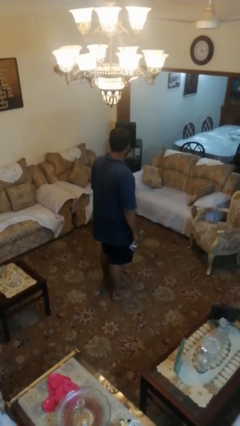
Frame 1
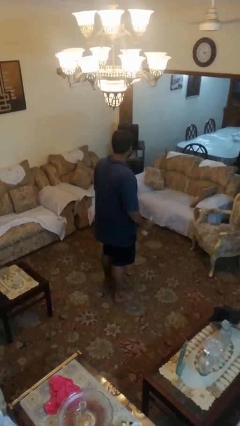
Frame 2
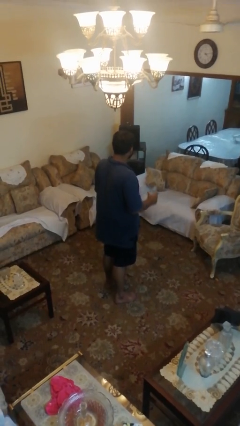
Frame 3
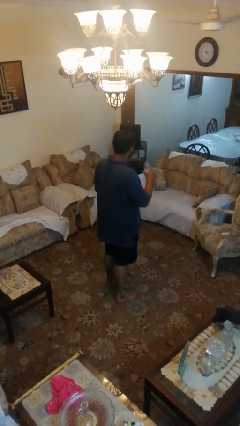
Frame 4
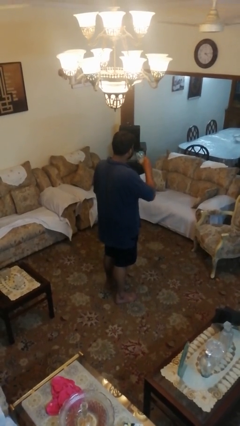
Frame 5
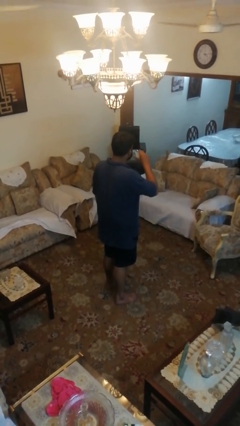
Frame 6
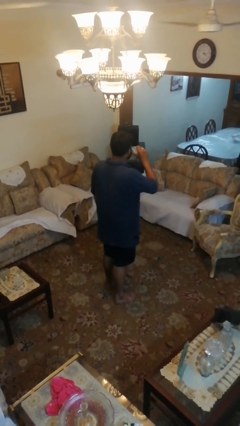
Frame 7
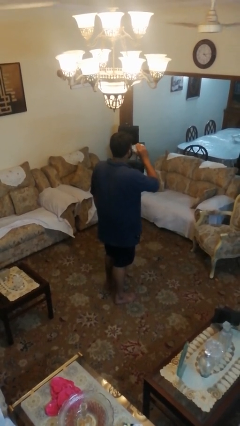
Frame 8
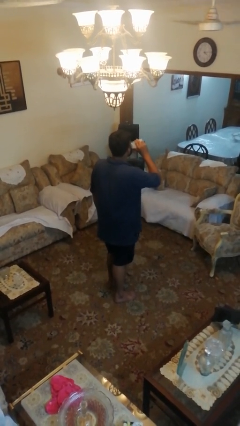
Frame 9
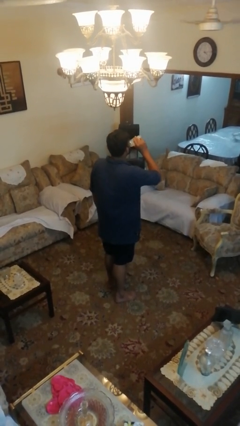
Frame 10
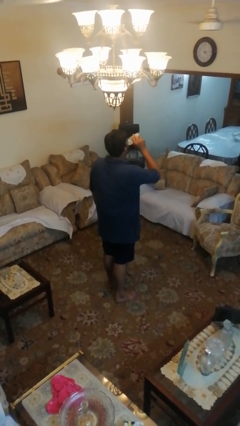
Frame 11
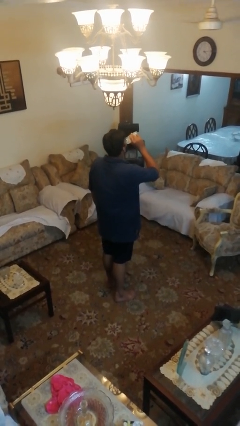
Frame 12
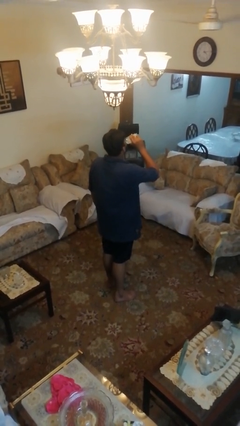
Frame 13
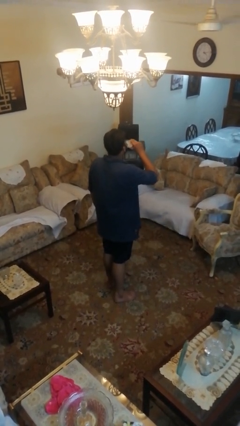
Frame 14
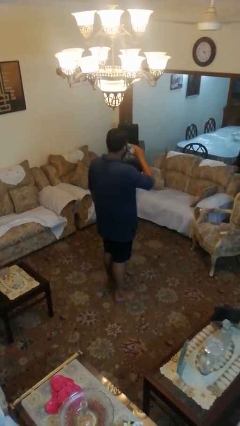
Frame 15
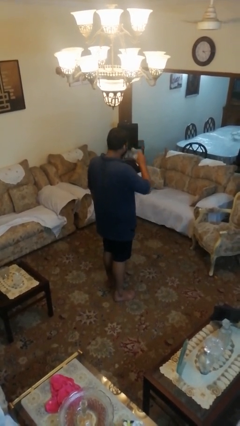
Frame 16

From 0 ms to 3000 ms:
person drinks from bottle

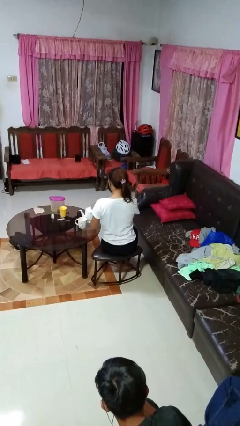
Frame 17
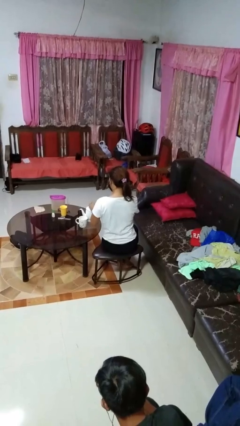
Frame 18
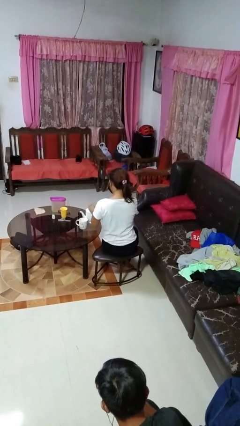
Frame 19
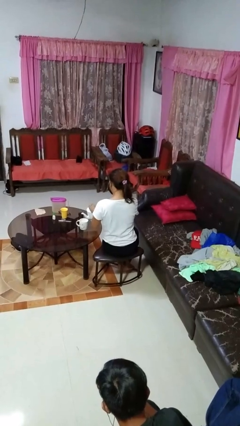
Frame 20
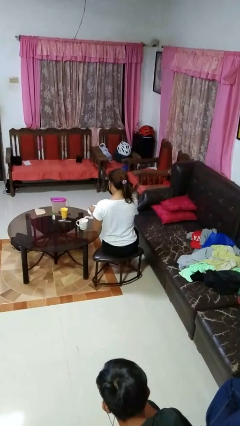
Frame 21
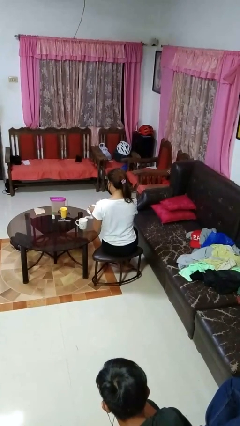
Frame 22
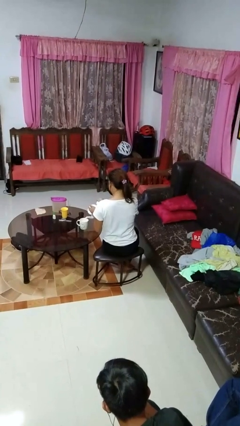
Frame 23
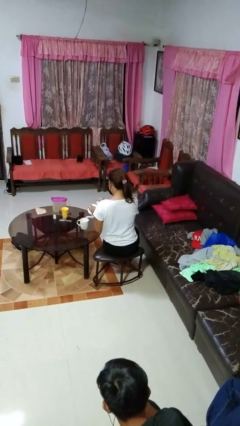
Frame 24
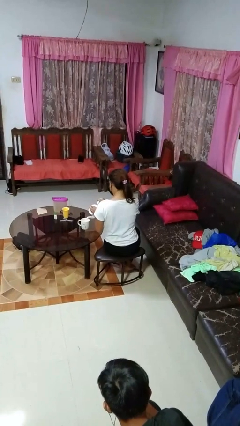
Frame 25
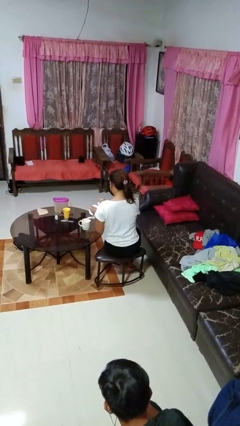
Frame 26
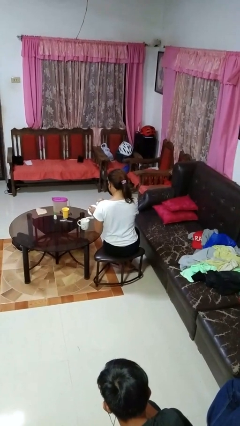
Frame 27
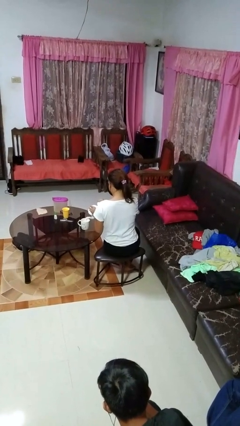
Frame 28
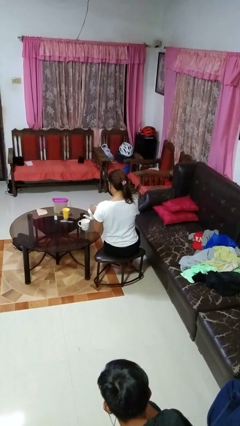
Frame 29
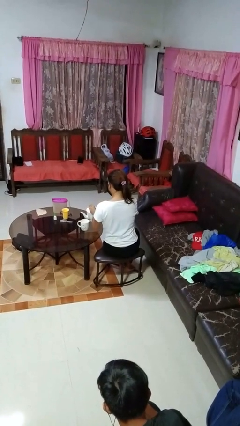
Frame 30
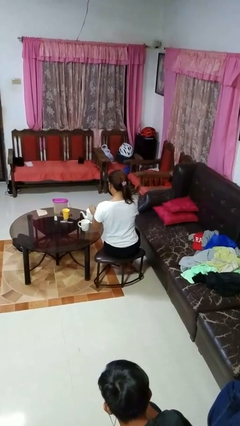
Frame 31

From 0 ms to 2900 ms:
person pours coffee into mug

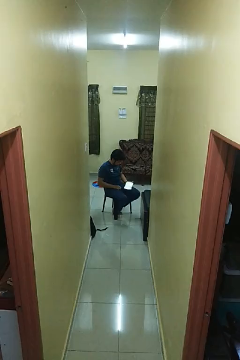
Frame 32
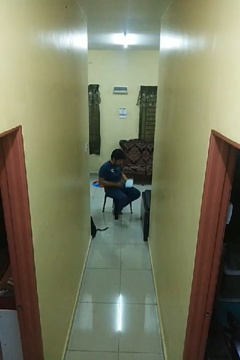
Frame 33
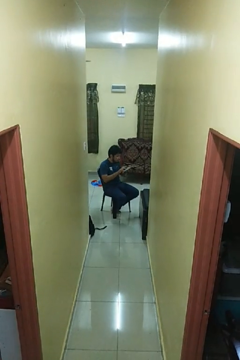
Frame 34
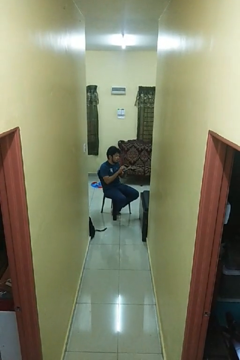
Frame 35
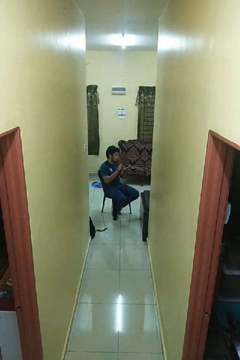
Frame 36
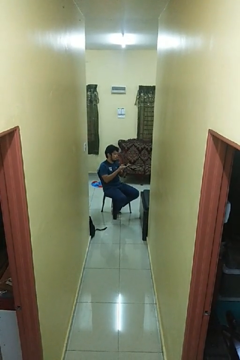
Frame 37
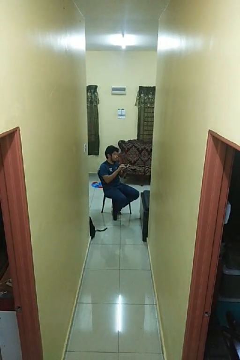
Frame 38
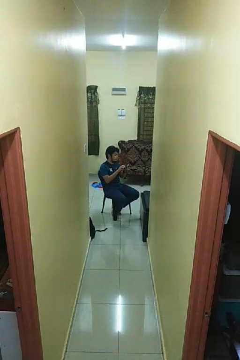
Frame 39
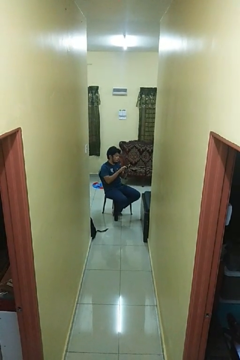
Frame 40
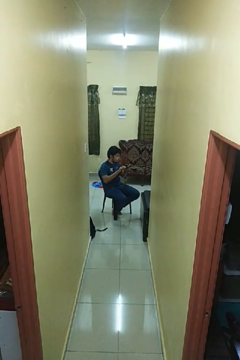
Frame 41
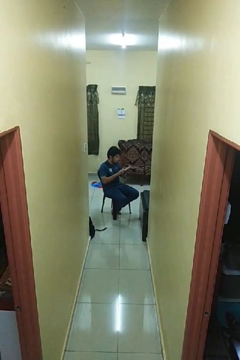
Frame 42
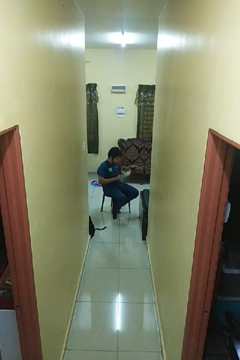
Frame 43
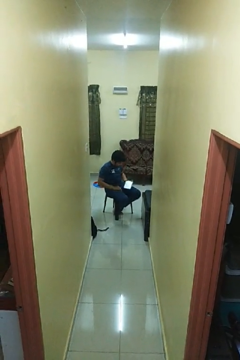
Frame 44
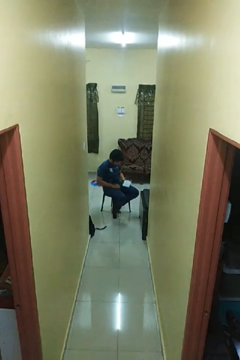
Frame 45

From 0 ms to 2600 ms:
person interacts with tablet

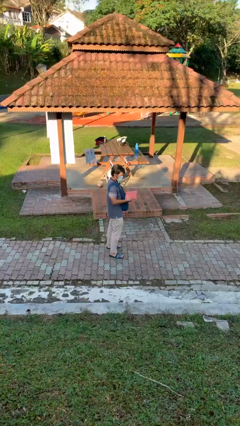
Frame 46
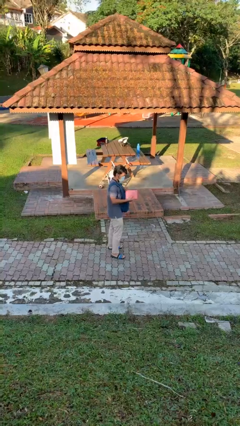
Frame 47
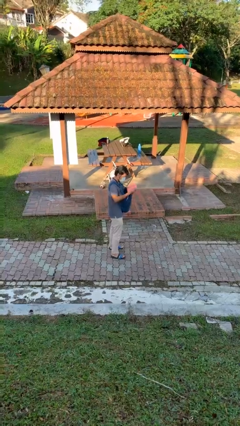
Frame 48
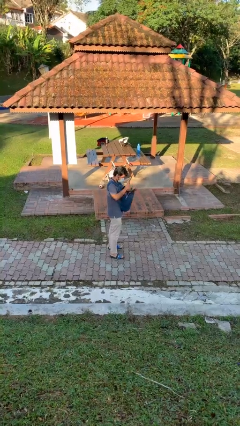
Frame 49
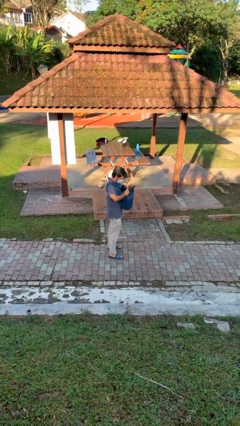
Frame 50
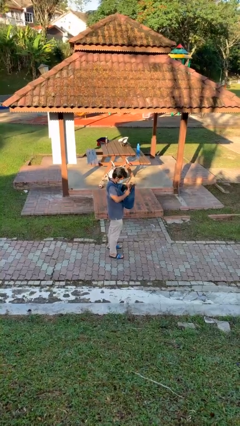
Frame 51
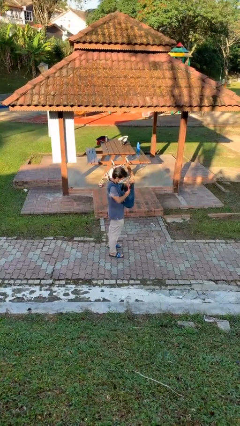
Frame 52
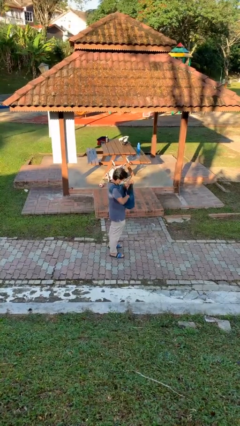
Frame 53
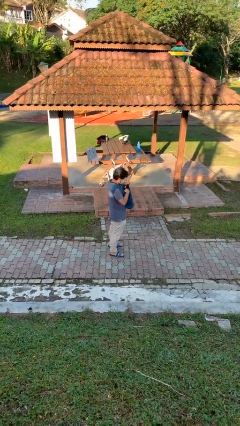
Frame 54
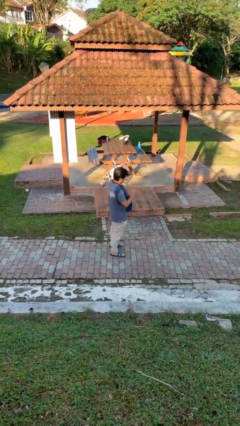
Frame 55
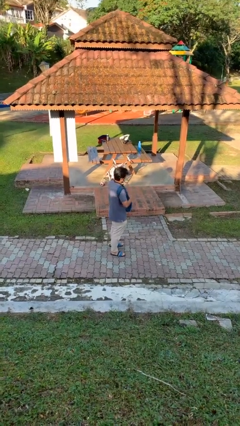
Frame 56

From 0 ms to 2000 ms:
person puts object into backpack

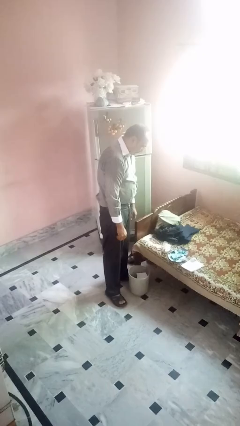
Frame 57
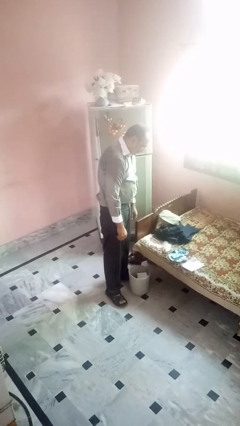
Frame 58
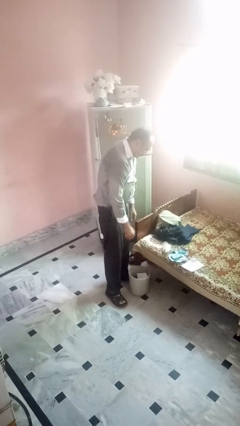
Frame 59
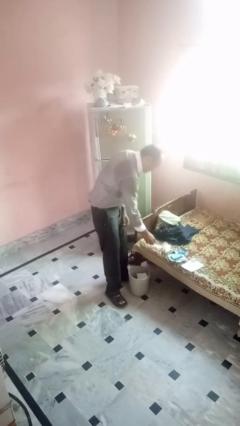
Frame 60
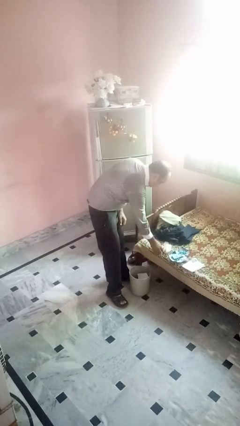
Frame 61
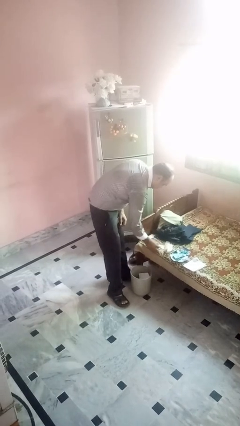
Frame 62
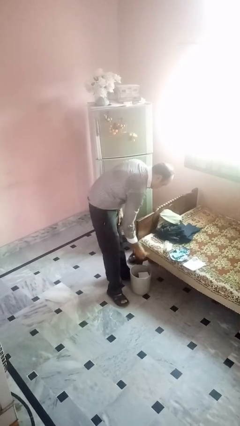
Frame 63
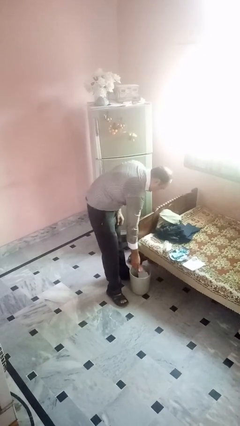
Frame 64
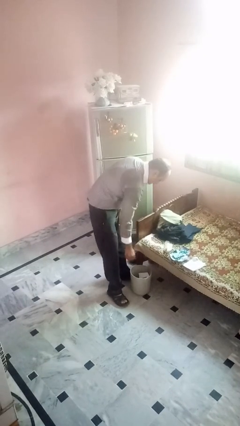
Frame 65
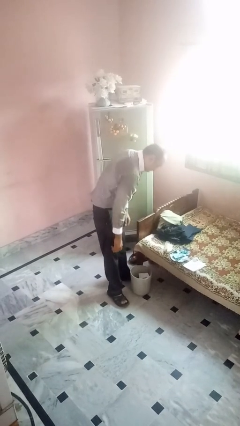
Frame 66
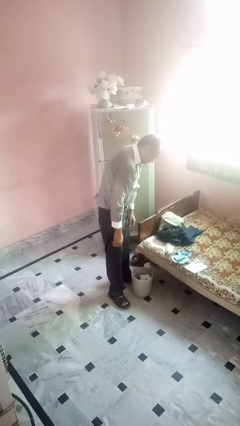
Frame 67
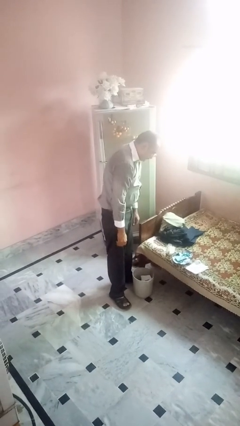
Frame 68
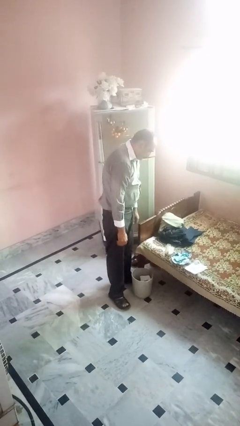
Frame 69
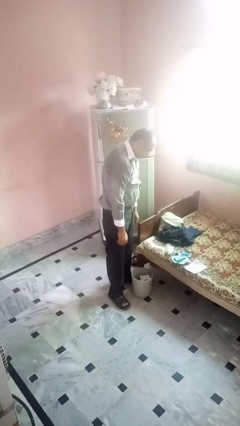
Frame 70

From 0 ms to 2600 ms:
person discards trash

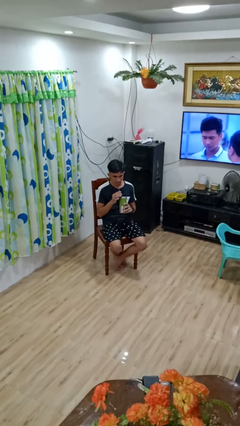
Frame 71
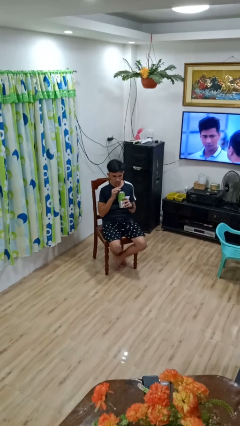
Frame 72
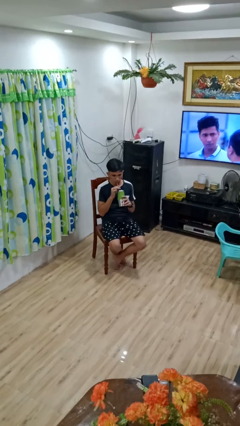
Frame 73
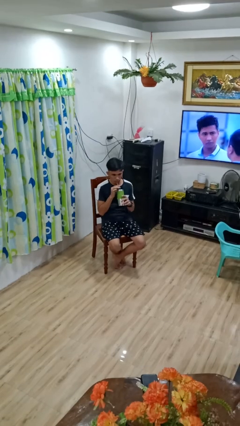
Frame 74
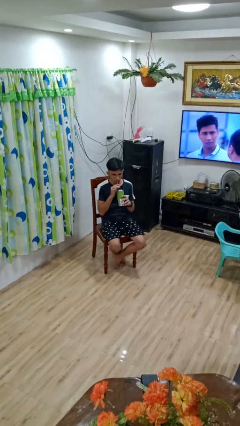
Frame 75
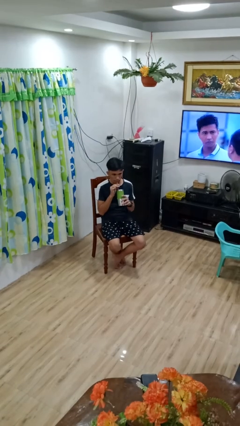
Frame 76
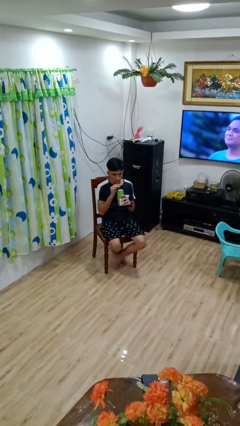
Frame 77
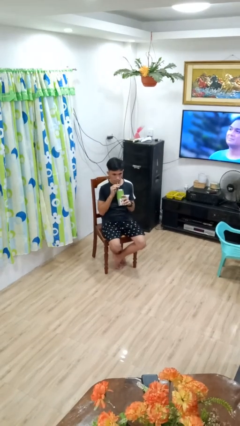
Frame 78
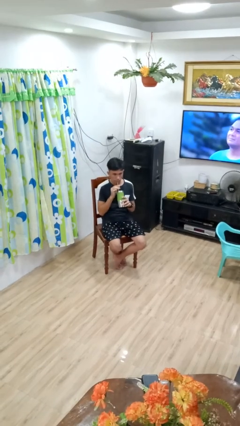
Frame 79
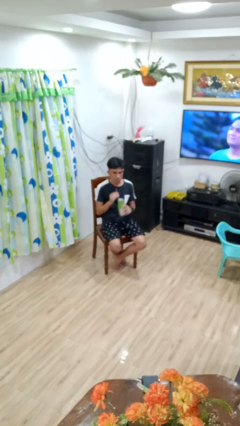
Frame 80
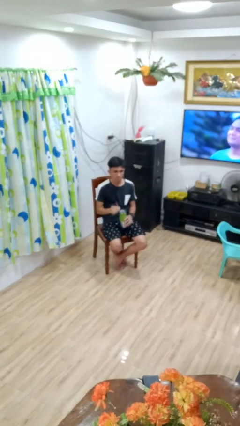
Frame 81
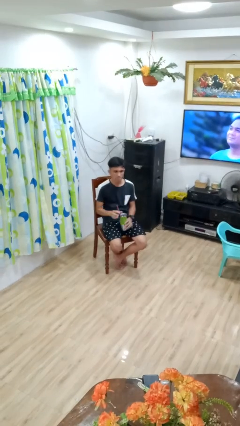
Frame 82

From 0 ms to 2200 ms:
person drinks from straw

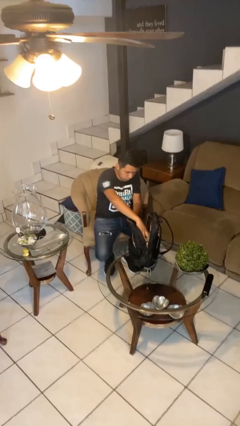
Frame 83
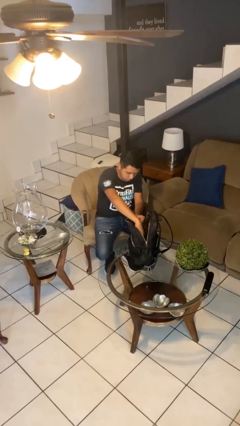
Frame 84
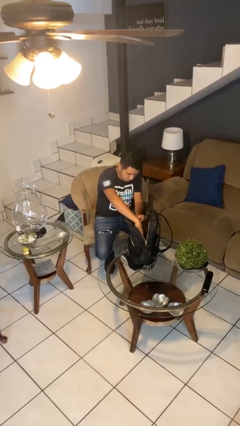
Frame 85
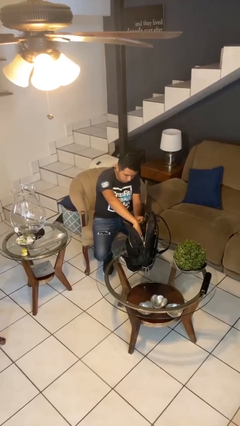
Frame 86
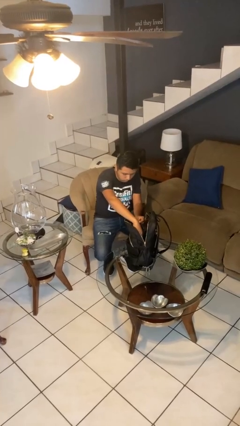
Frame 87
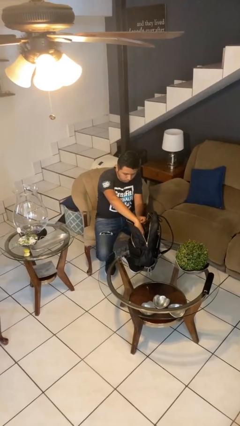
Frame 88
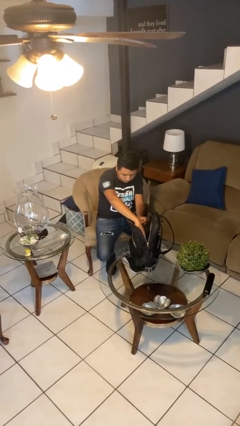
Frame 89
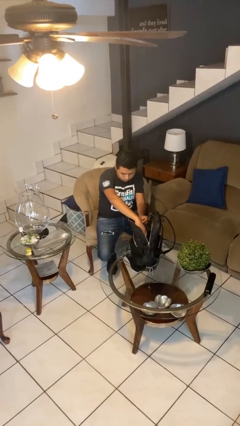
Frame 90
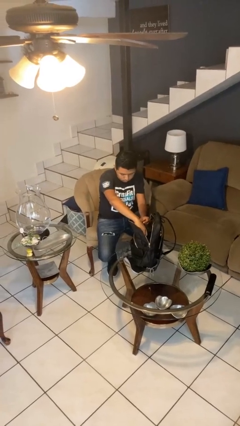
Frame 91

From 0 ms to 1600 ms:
person searches in backpack

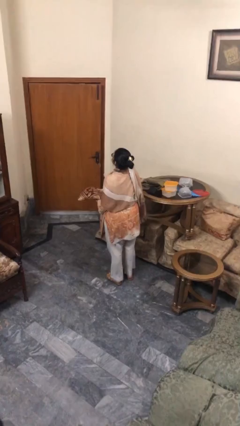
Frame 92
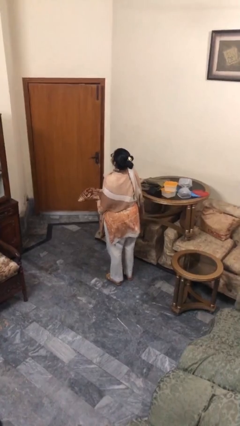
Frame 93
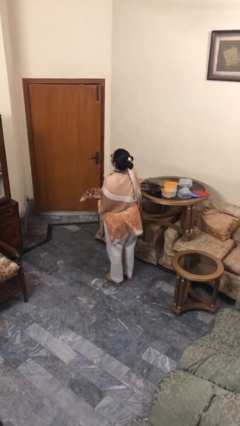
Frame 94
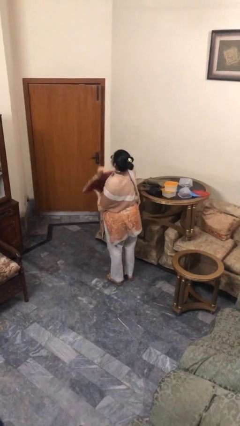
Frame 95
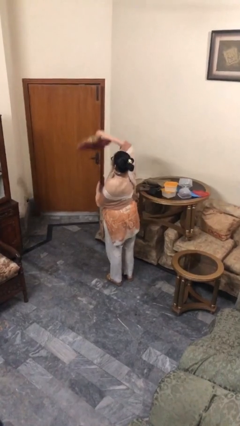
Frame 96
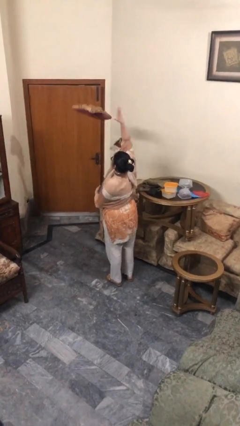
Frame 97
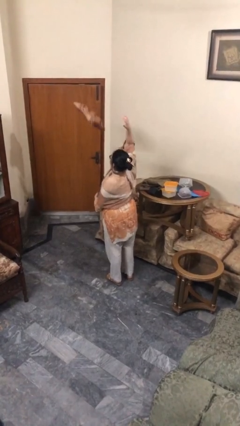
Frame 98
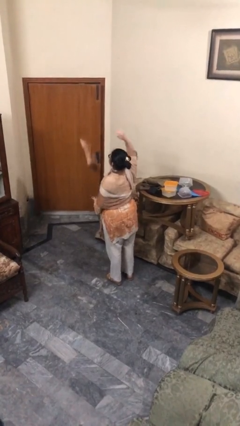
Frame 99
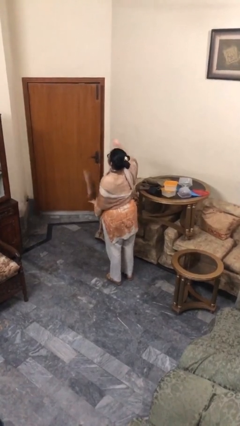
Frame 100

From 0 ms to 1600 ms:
person drops object
